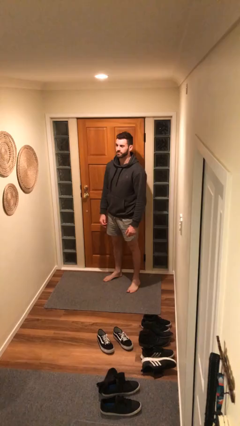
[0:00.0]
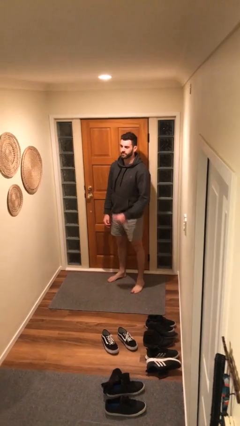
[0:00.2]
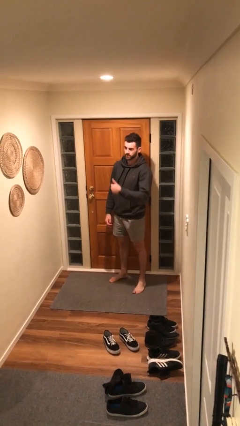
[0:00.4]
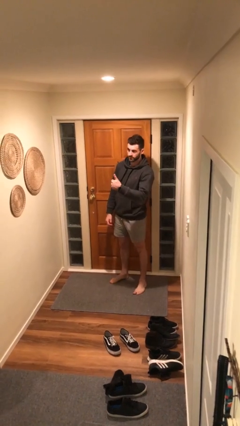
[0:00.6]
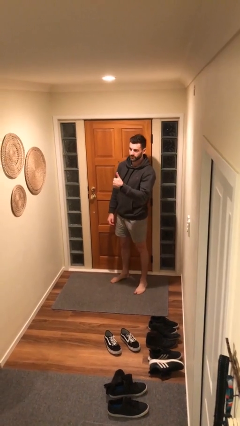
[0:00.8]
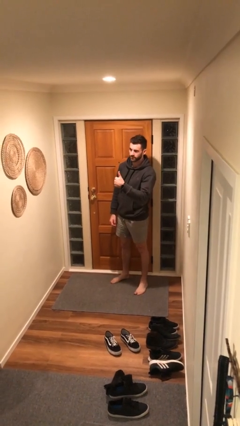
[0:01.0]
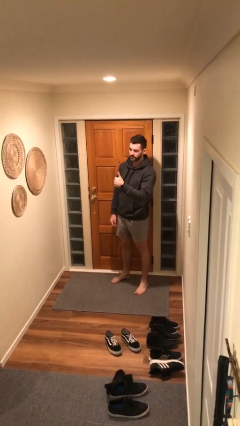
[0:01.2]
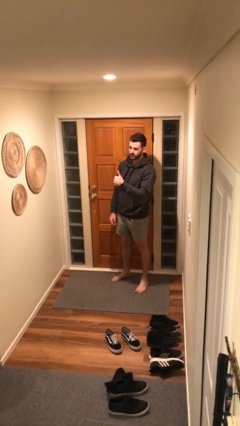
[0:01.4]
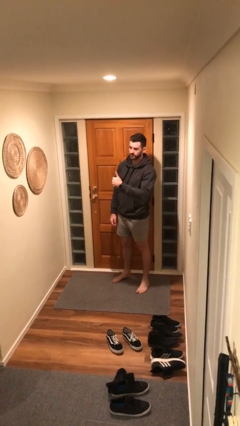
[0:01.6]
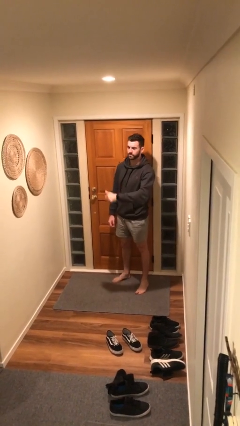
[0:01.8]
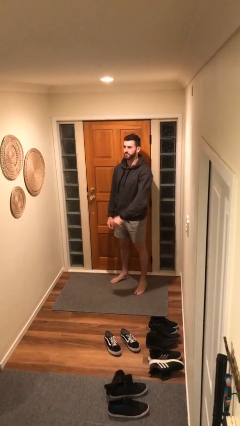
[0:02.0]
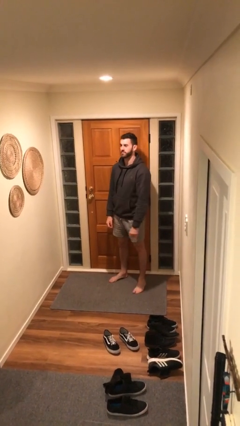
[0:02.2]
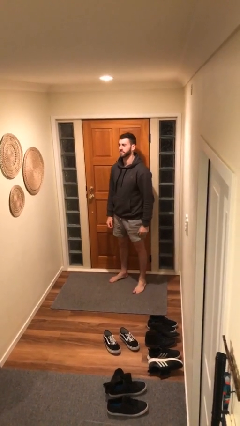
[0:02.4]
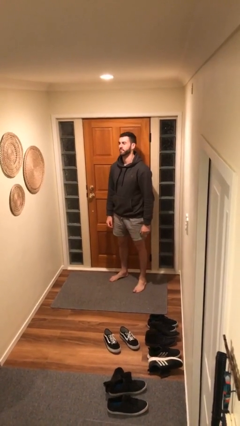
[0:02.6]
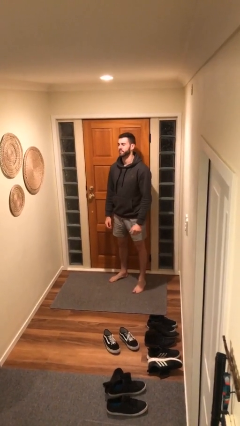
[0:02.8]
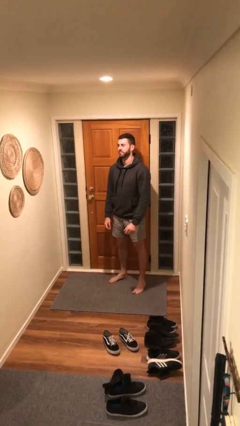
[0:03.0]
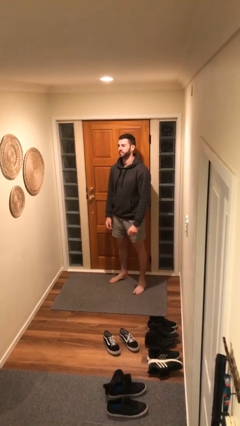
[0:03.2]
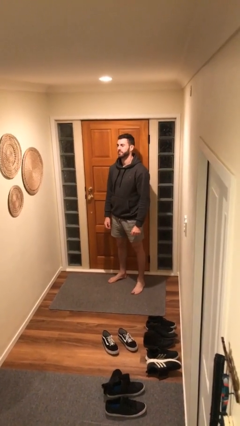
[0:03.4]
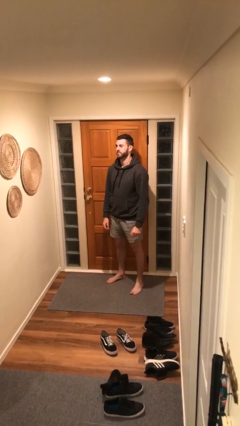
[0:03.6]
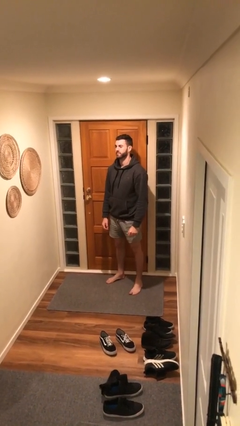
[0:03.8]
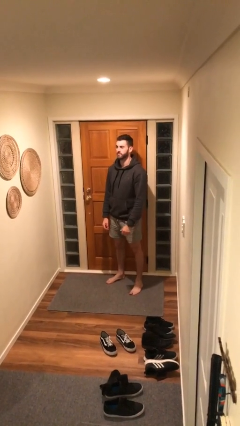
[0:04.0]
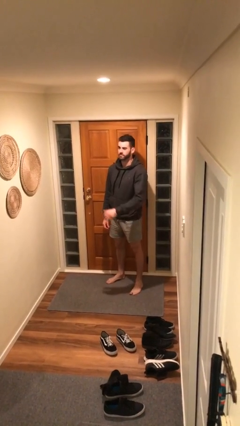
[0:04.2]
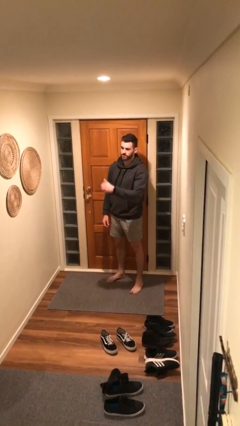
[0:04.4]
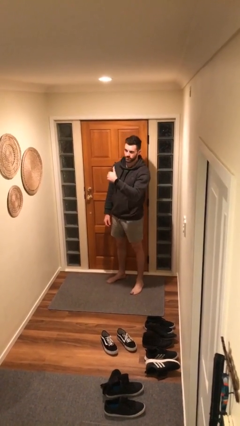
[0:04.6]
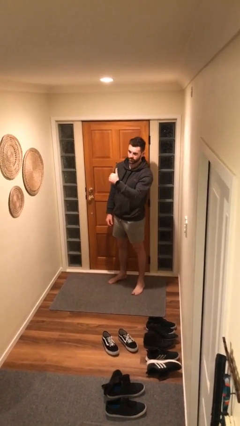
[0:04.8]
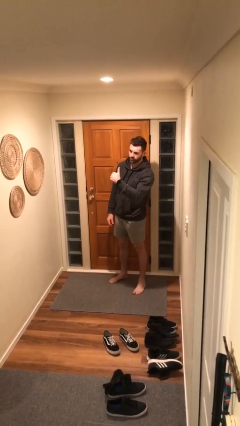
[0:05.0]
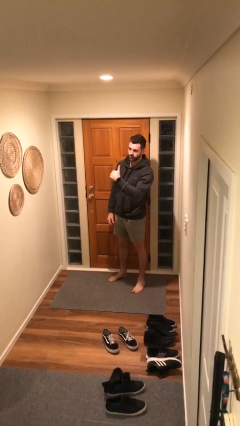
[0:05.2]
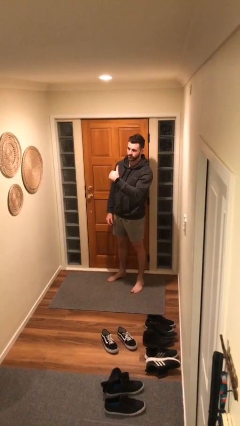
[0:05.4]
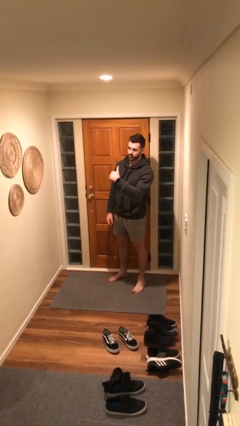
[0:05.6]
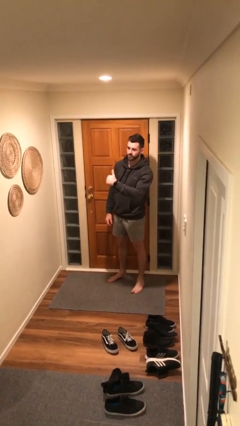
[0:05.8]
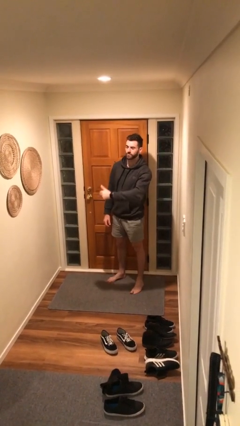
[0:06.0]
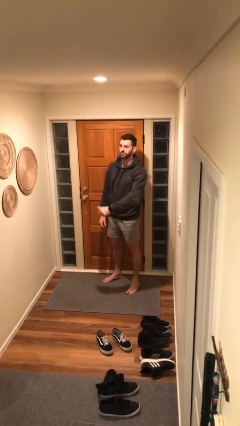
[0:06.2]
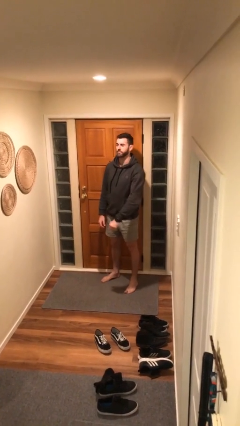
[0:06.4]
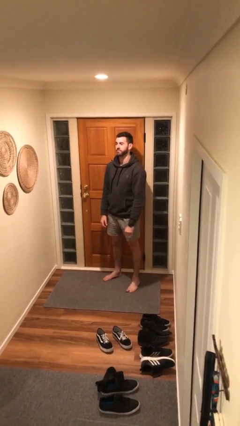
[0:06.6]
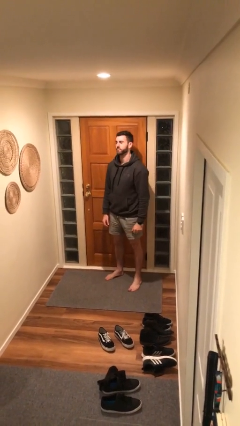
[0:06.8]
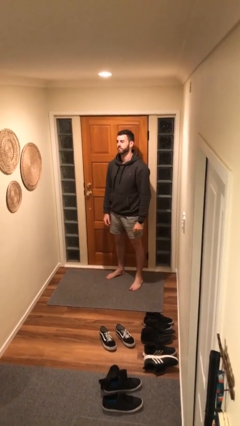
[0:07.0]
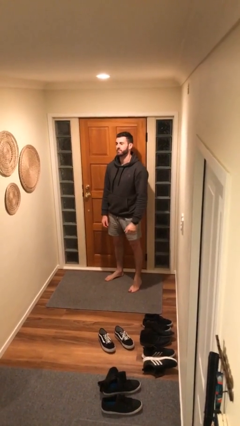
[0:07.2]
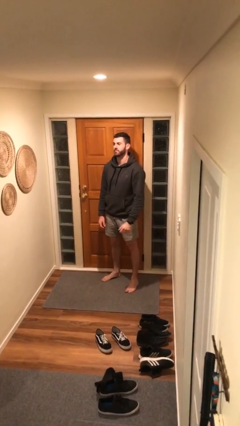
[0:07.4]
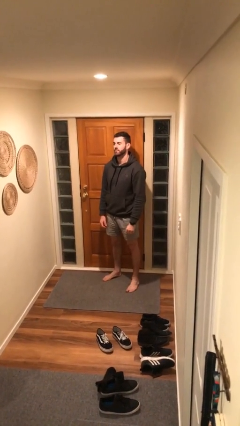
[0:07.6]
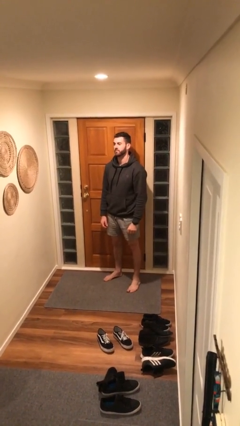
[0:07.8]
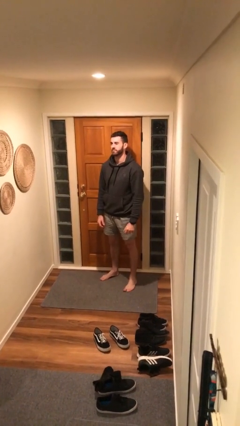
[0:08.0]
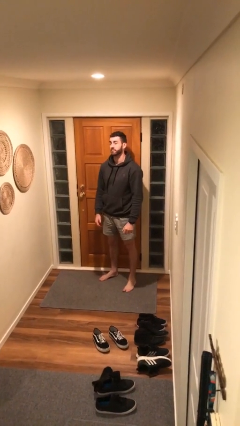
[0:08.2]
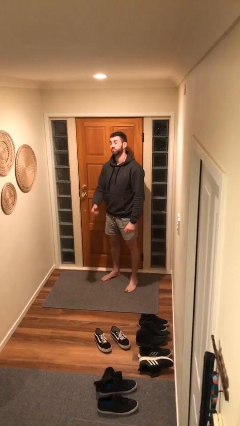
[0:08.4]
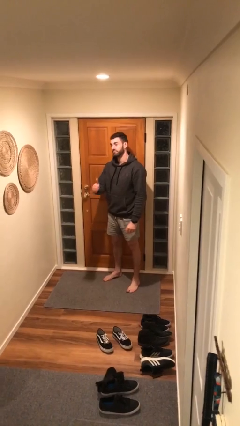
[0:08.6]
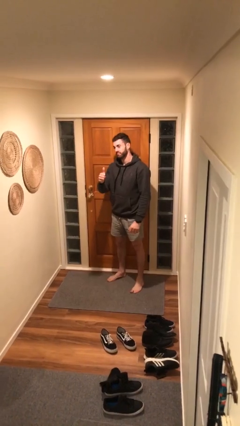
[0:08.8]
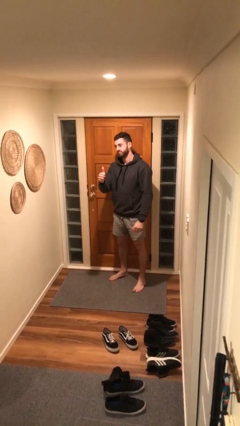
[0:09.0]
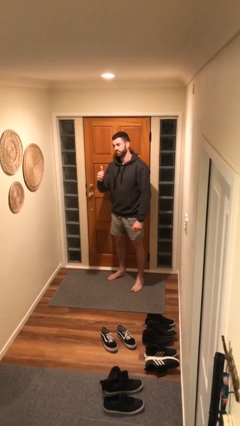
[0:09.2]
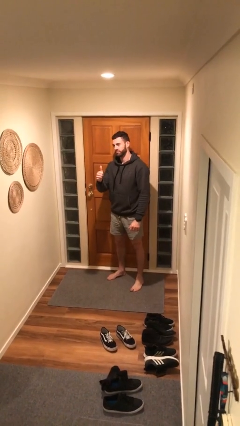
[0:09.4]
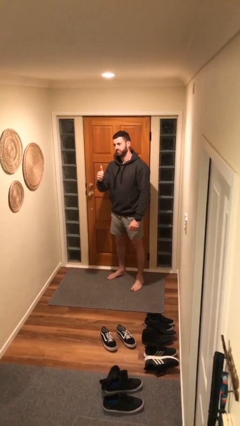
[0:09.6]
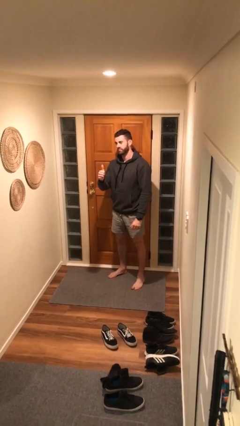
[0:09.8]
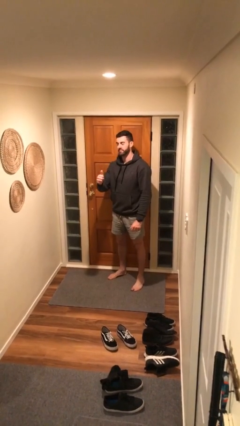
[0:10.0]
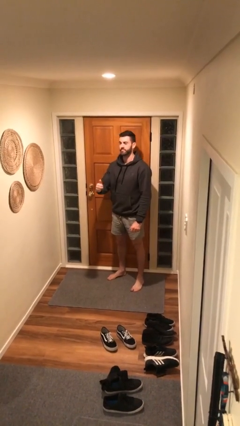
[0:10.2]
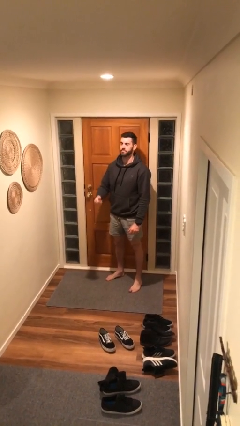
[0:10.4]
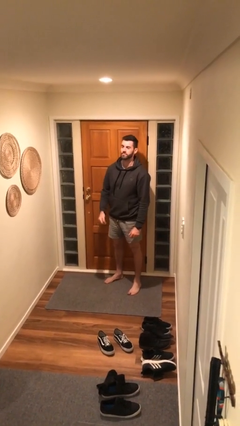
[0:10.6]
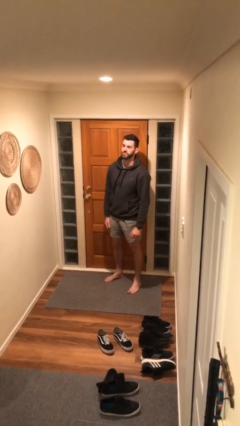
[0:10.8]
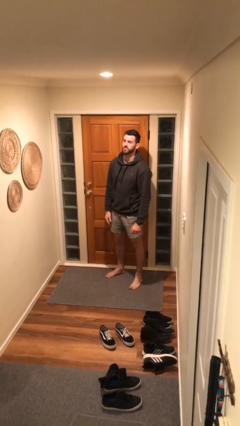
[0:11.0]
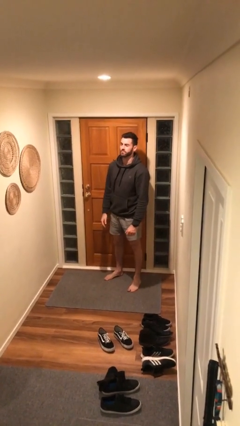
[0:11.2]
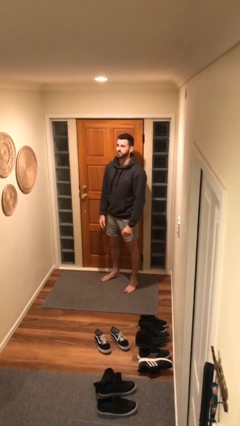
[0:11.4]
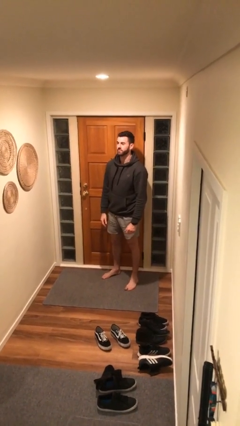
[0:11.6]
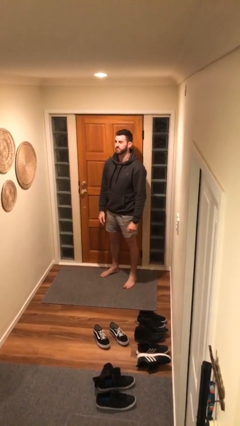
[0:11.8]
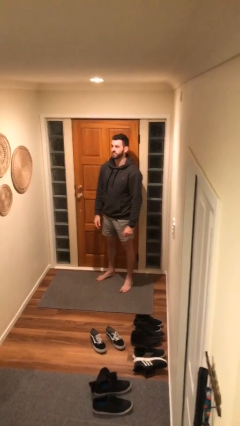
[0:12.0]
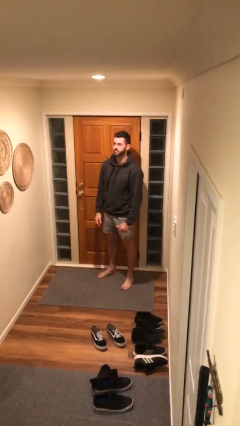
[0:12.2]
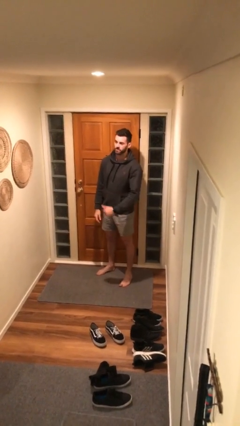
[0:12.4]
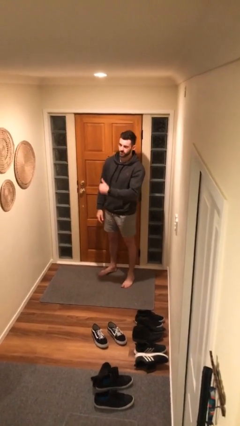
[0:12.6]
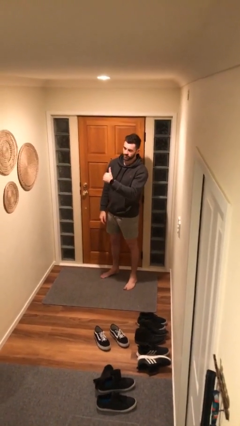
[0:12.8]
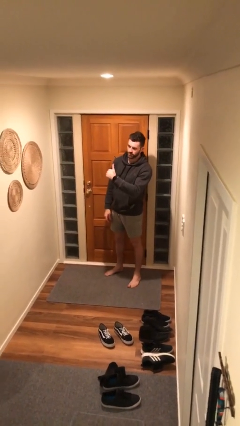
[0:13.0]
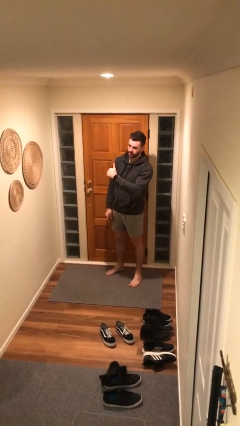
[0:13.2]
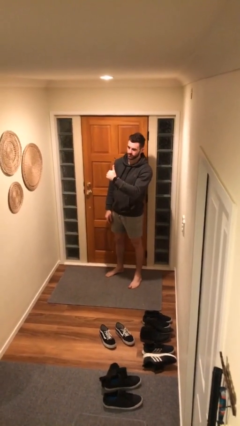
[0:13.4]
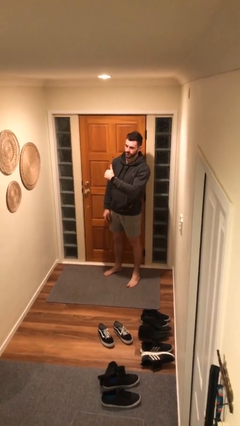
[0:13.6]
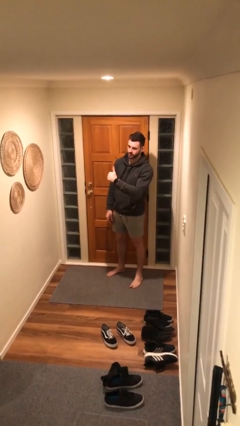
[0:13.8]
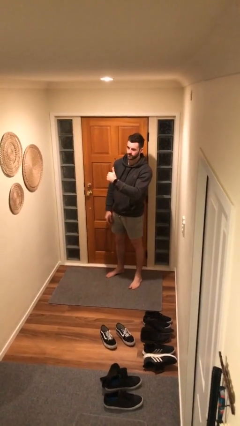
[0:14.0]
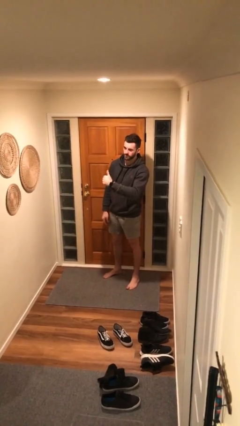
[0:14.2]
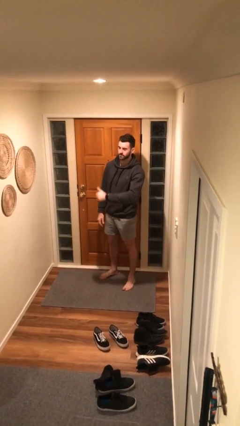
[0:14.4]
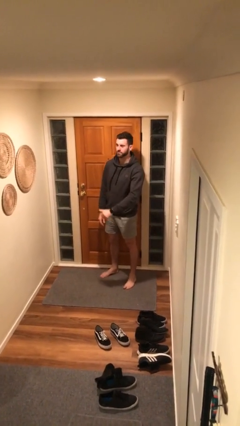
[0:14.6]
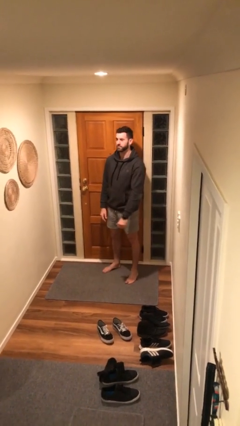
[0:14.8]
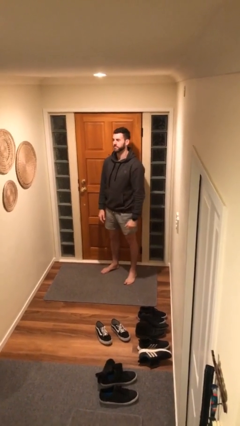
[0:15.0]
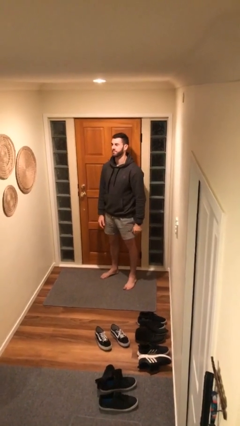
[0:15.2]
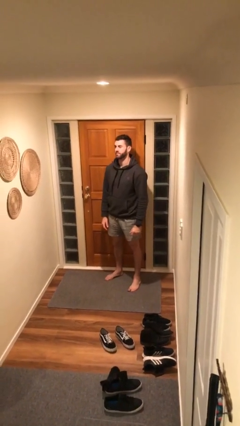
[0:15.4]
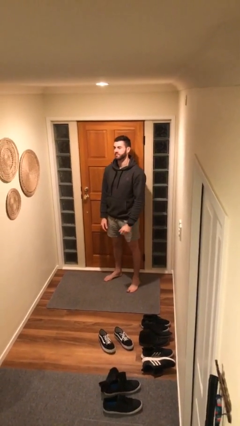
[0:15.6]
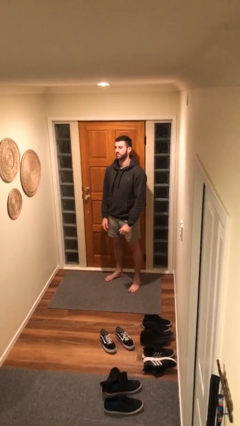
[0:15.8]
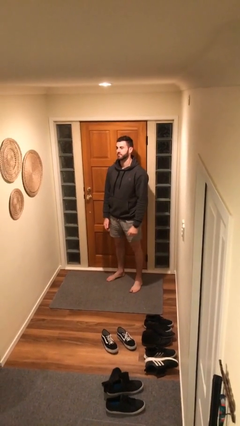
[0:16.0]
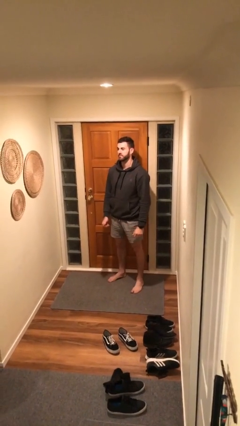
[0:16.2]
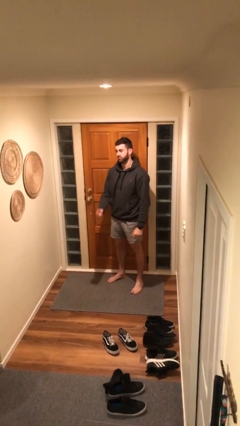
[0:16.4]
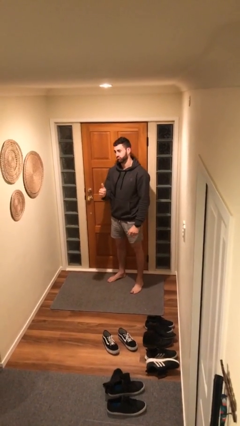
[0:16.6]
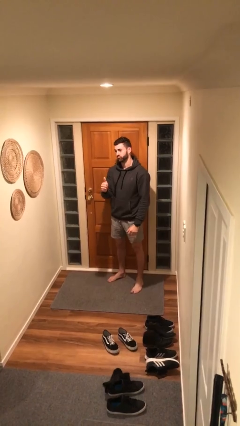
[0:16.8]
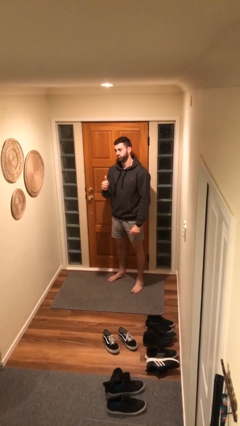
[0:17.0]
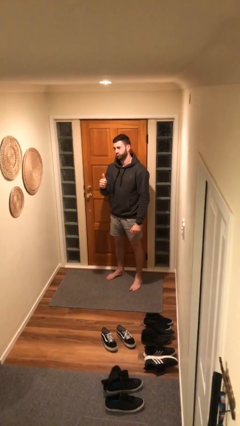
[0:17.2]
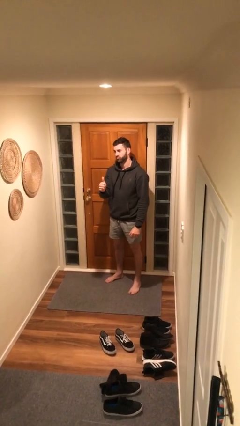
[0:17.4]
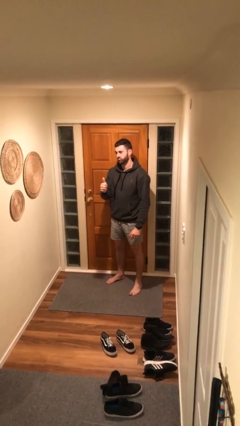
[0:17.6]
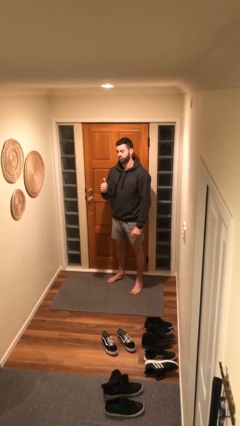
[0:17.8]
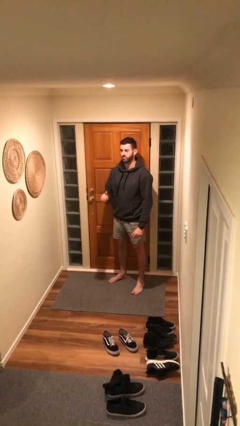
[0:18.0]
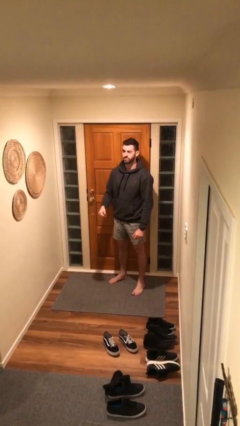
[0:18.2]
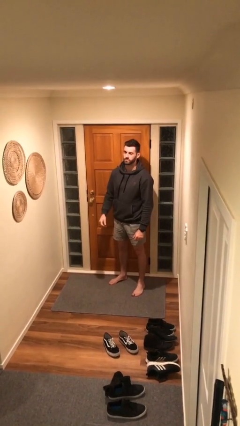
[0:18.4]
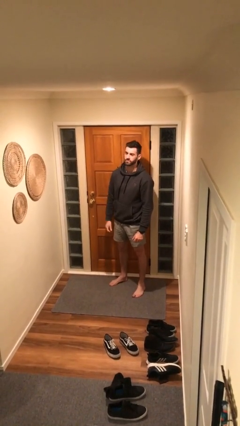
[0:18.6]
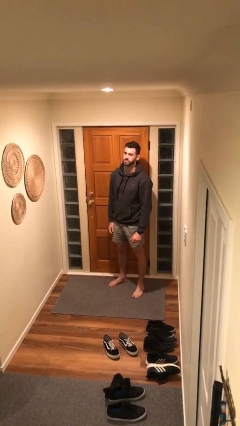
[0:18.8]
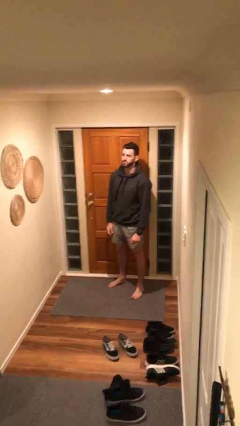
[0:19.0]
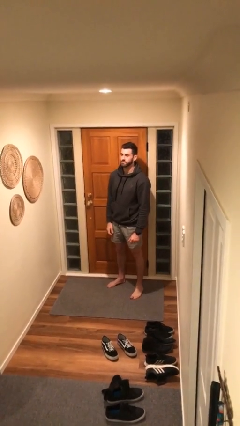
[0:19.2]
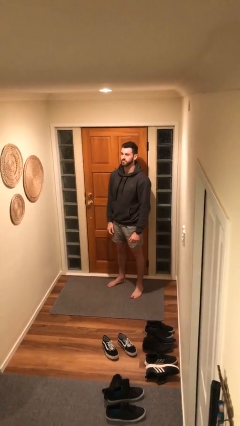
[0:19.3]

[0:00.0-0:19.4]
person gestures thumbs up
